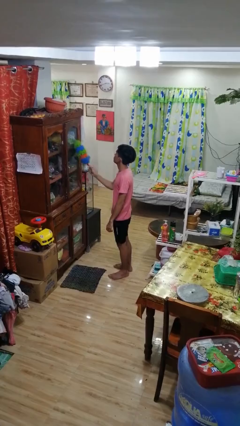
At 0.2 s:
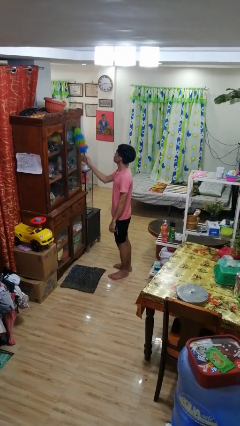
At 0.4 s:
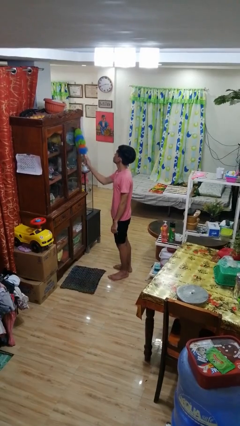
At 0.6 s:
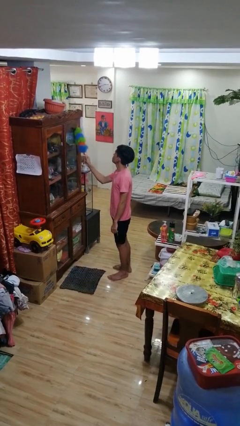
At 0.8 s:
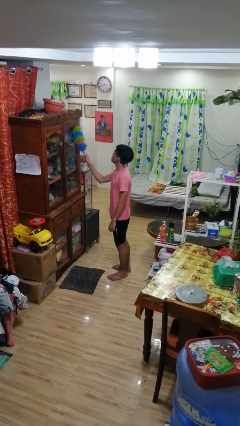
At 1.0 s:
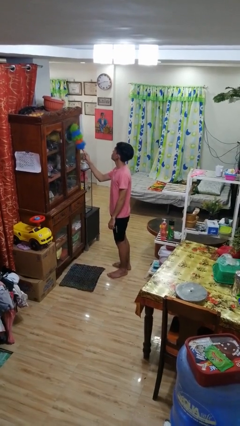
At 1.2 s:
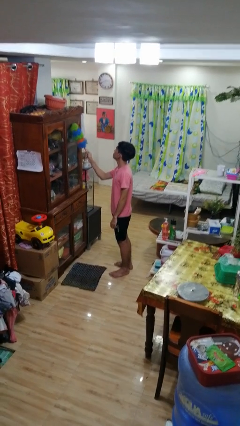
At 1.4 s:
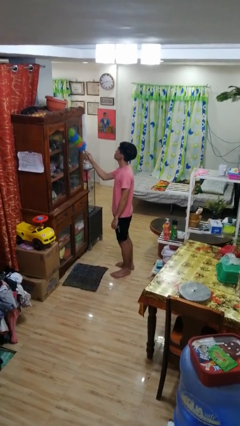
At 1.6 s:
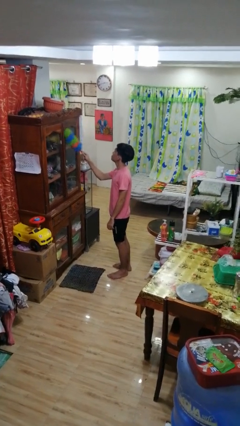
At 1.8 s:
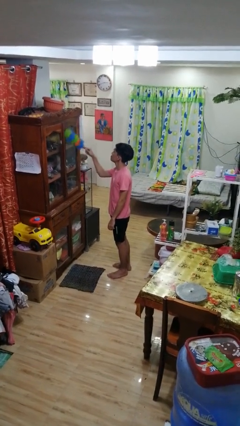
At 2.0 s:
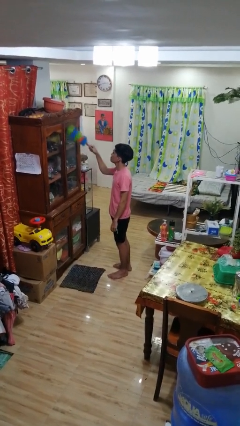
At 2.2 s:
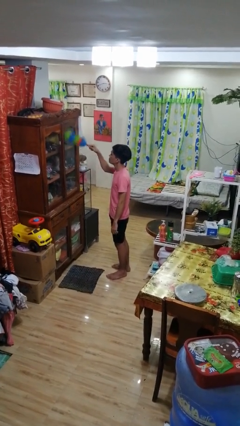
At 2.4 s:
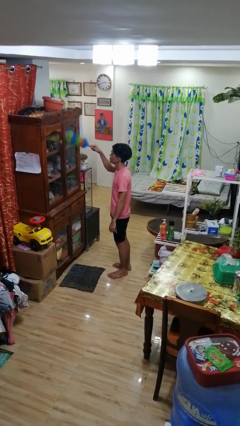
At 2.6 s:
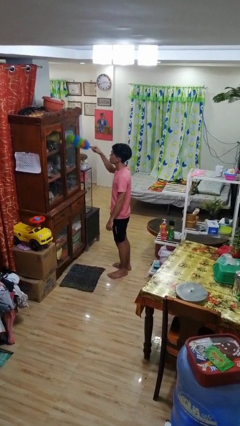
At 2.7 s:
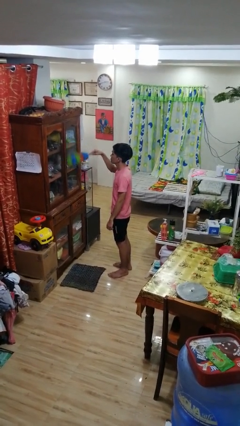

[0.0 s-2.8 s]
person dusts furniture

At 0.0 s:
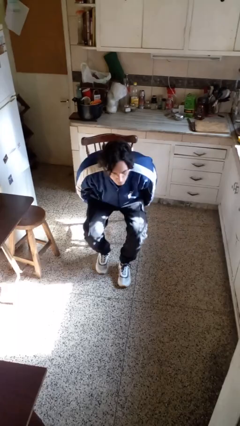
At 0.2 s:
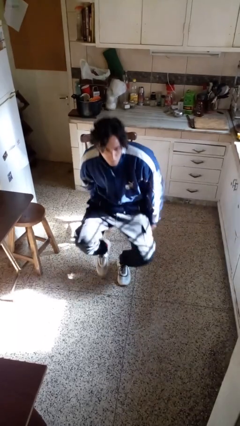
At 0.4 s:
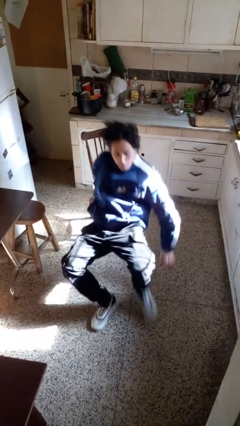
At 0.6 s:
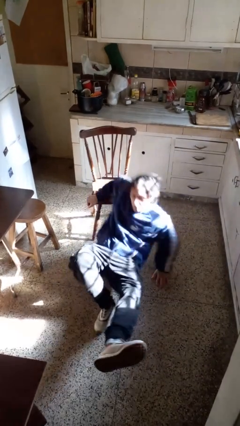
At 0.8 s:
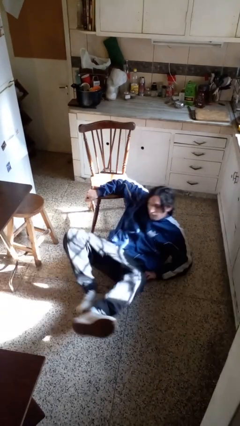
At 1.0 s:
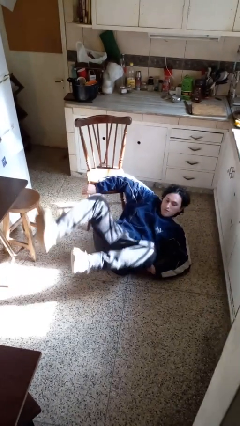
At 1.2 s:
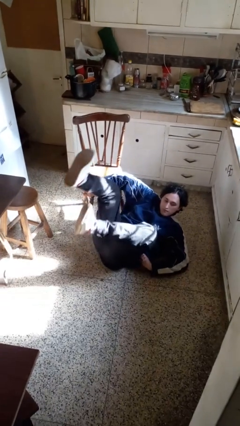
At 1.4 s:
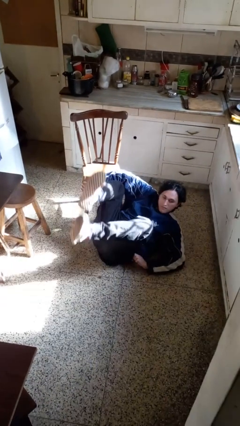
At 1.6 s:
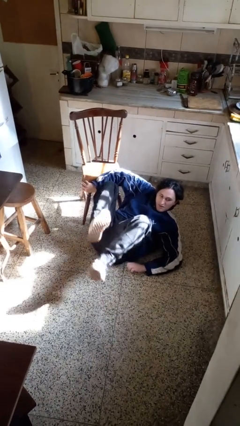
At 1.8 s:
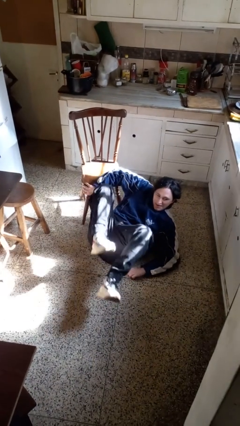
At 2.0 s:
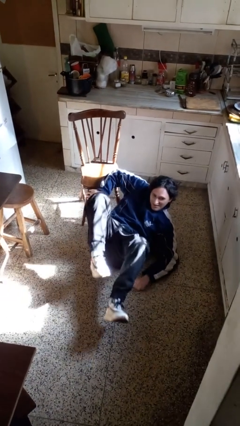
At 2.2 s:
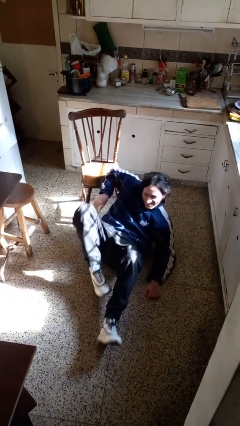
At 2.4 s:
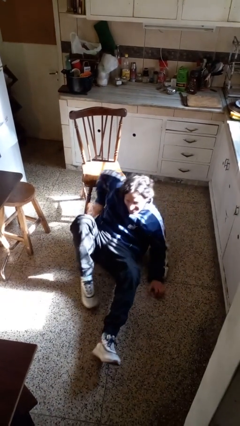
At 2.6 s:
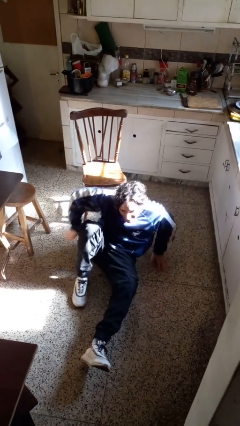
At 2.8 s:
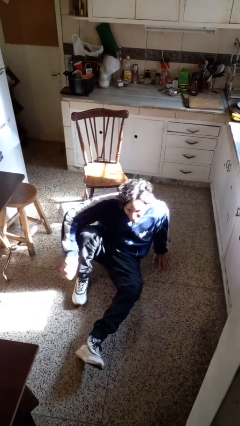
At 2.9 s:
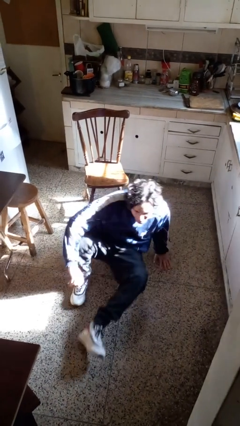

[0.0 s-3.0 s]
person falls from chair

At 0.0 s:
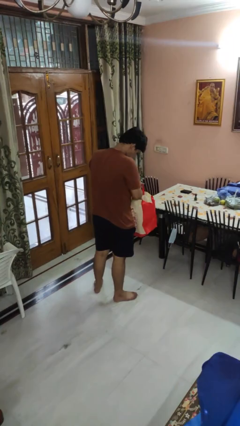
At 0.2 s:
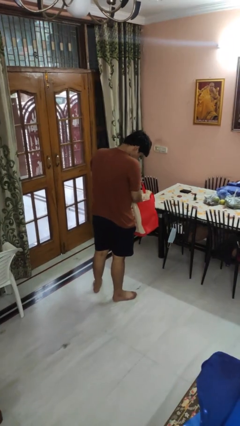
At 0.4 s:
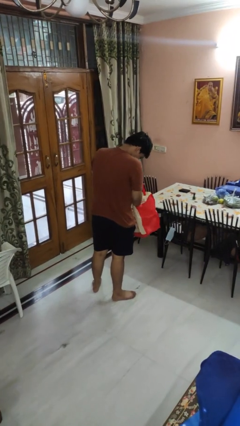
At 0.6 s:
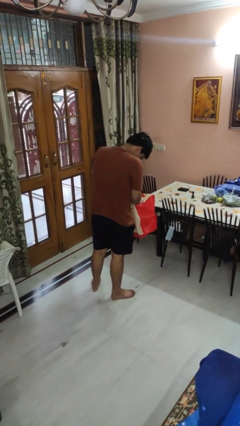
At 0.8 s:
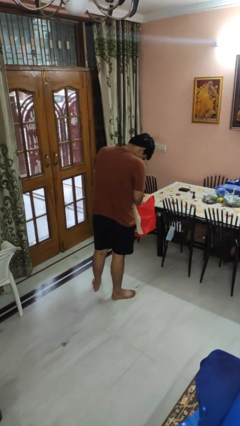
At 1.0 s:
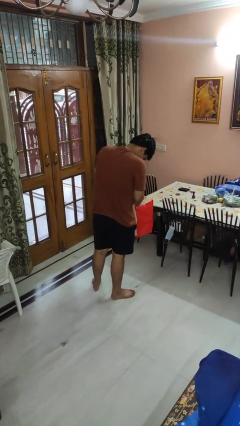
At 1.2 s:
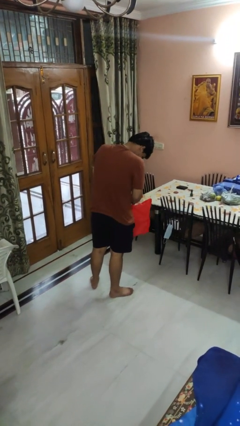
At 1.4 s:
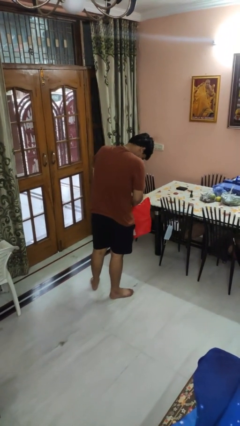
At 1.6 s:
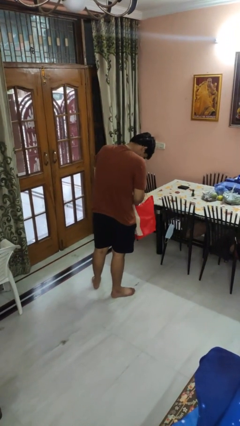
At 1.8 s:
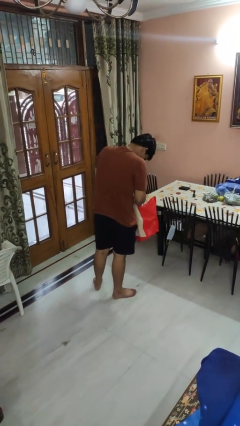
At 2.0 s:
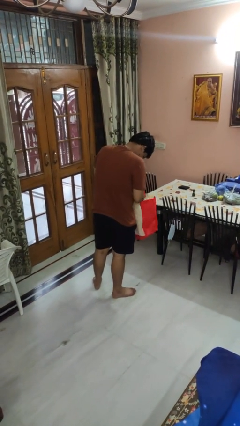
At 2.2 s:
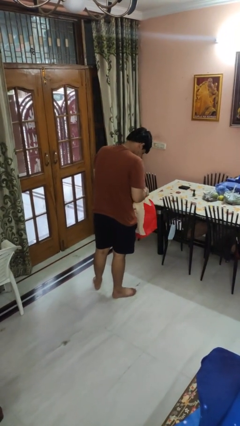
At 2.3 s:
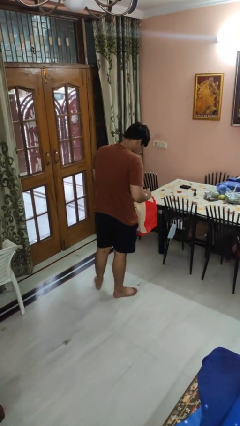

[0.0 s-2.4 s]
person searches in bag

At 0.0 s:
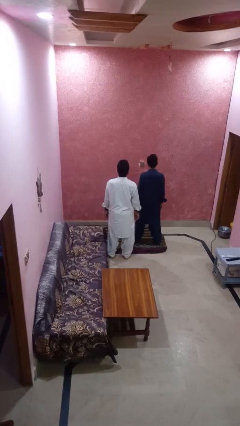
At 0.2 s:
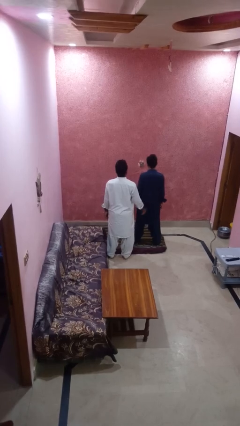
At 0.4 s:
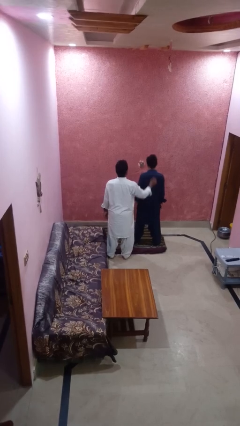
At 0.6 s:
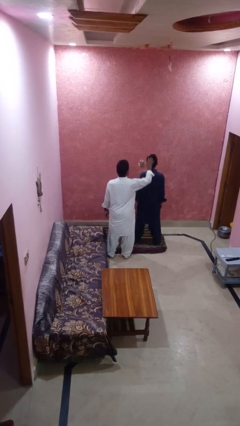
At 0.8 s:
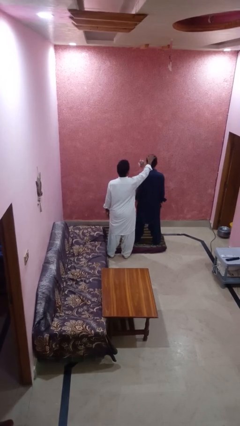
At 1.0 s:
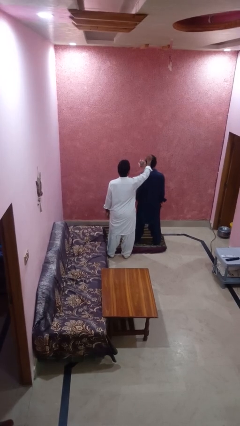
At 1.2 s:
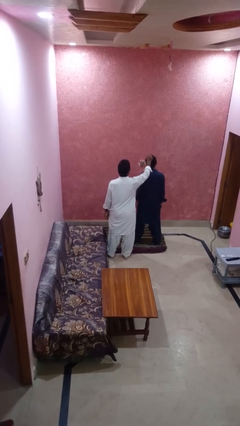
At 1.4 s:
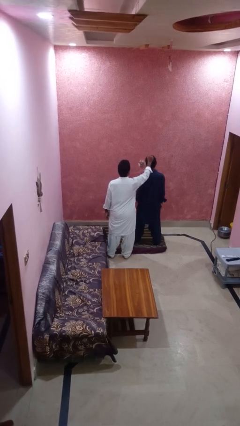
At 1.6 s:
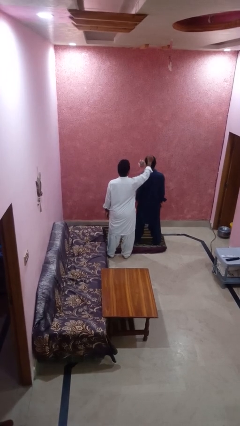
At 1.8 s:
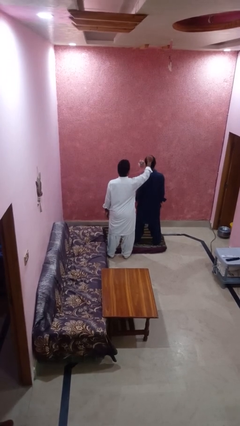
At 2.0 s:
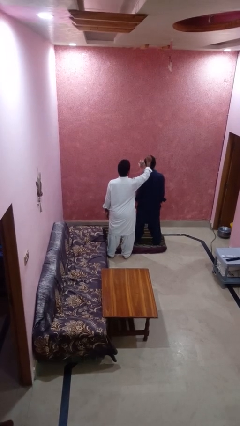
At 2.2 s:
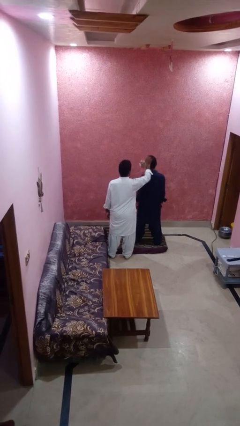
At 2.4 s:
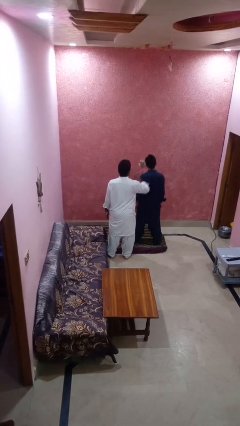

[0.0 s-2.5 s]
person grabs person by hair

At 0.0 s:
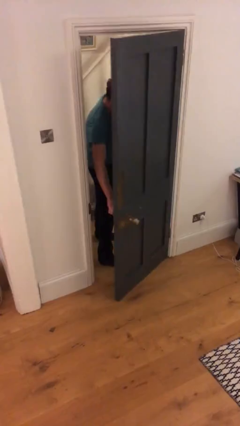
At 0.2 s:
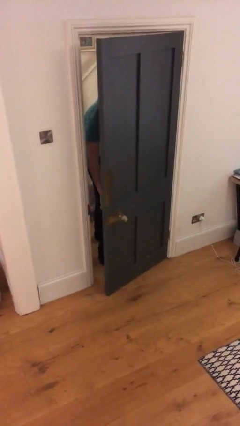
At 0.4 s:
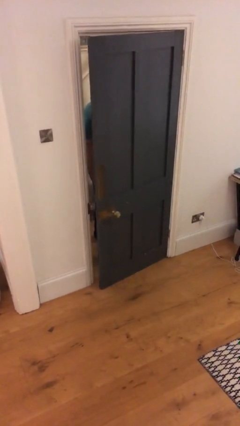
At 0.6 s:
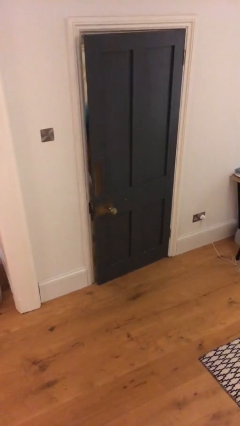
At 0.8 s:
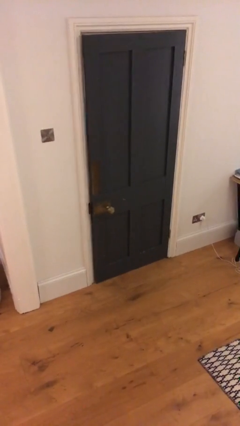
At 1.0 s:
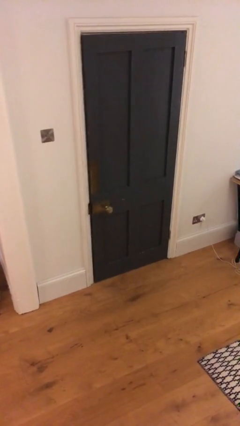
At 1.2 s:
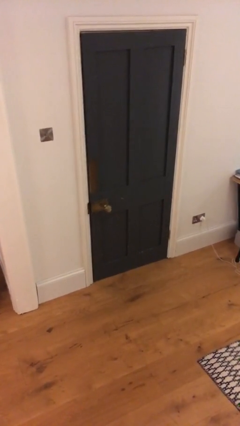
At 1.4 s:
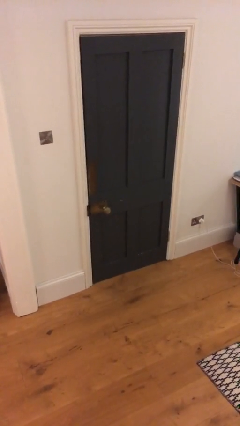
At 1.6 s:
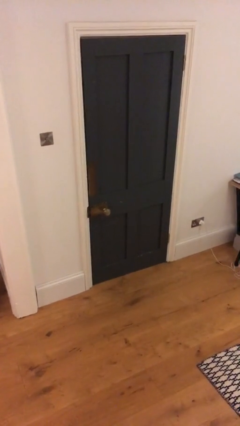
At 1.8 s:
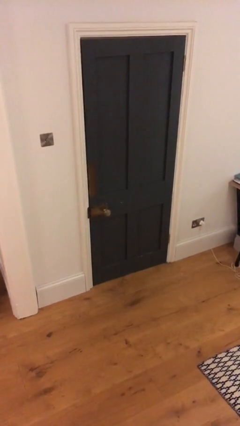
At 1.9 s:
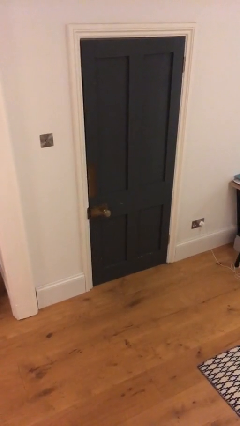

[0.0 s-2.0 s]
person closes facility door

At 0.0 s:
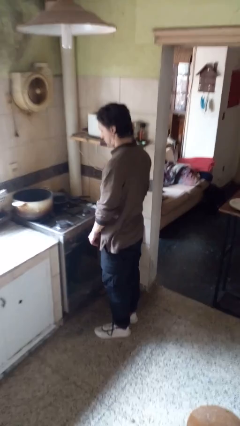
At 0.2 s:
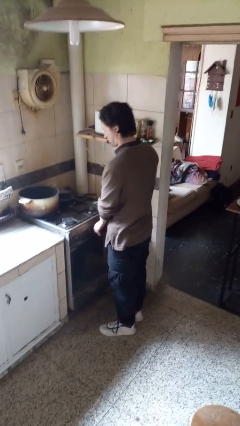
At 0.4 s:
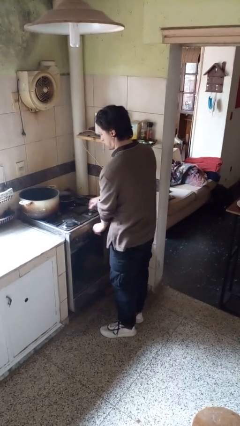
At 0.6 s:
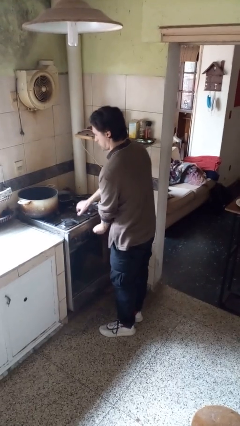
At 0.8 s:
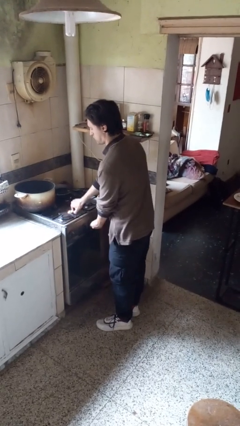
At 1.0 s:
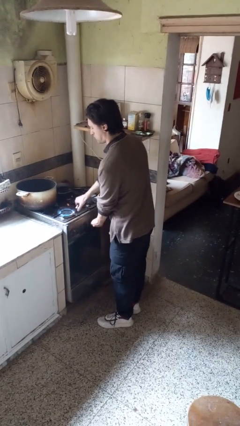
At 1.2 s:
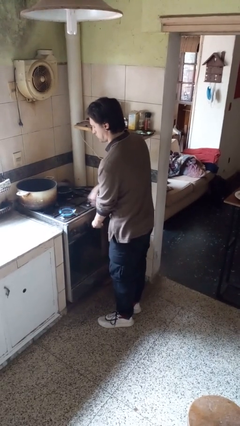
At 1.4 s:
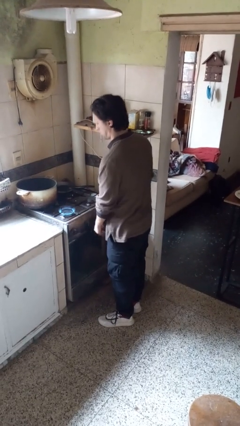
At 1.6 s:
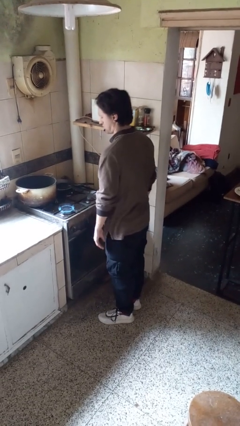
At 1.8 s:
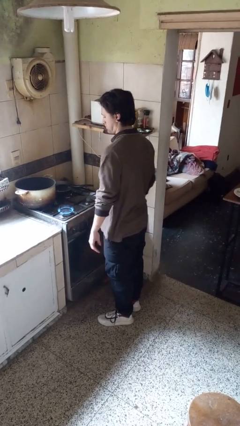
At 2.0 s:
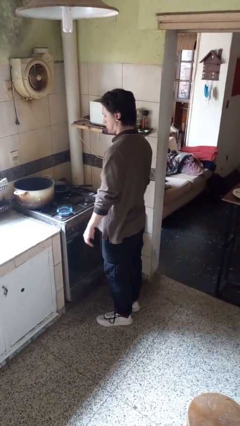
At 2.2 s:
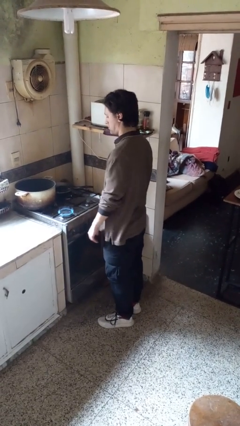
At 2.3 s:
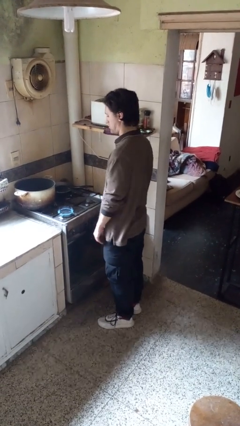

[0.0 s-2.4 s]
person turns on stovetop

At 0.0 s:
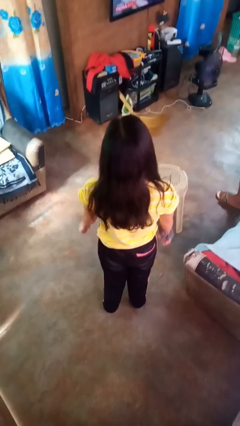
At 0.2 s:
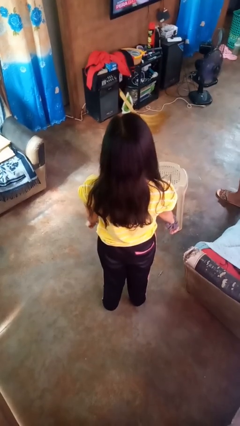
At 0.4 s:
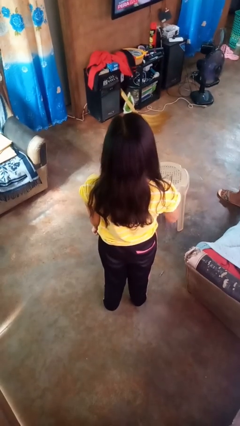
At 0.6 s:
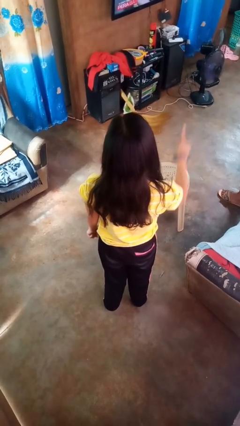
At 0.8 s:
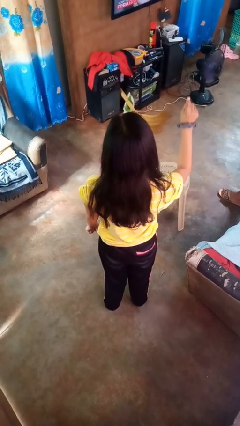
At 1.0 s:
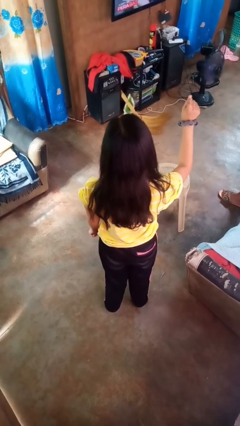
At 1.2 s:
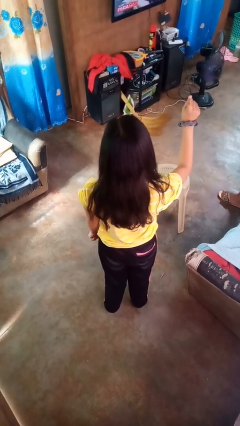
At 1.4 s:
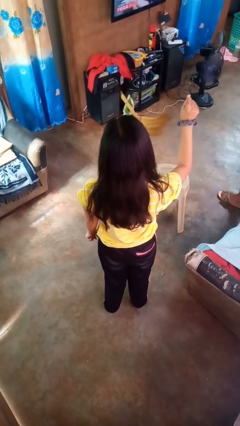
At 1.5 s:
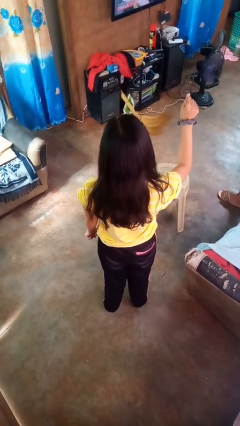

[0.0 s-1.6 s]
person gestures number one

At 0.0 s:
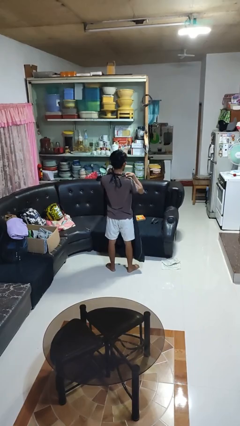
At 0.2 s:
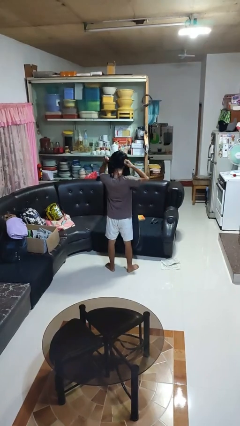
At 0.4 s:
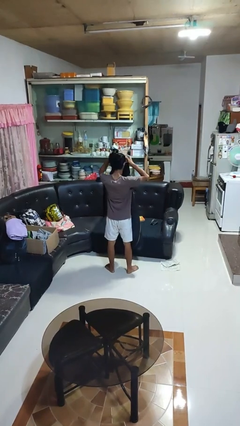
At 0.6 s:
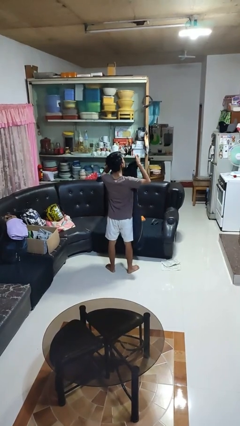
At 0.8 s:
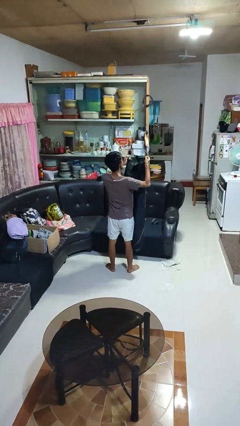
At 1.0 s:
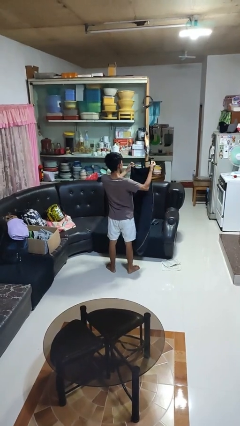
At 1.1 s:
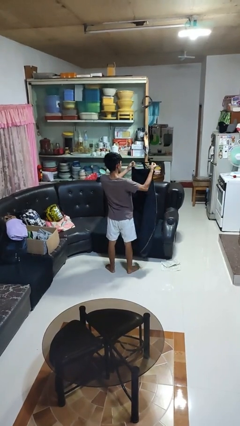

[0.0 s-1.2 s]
person takes off apron
